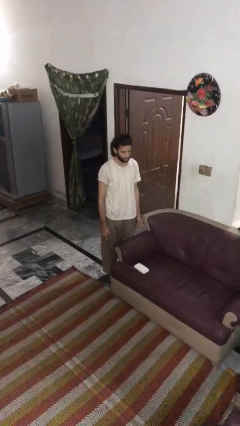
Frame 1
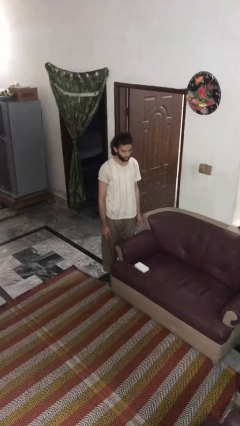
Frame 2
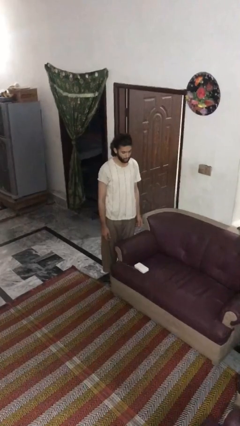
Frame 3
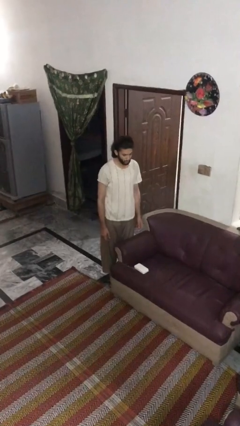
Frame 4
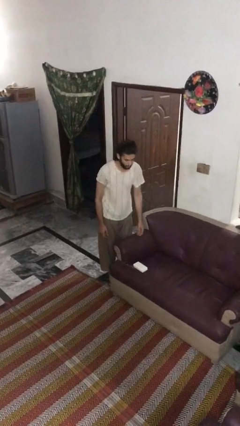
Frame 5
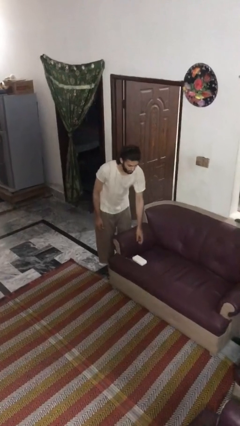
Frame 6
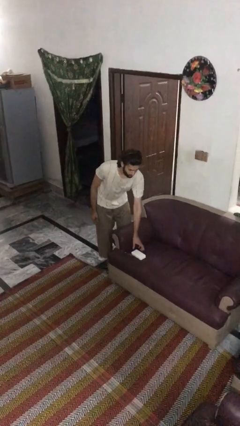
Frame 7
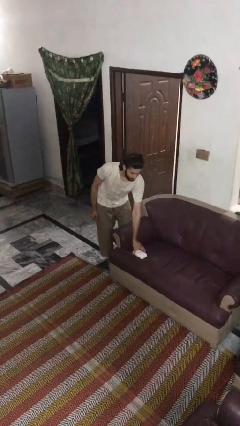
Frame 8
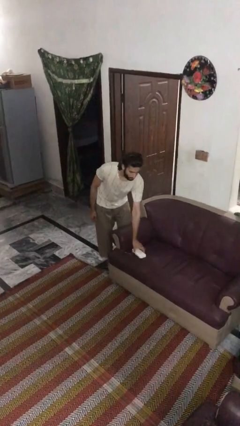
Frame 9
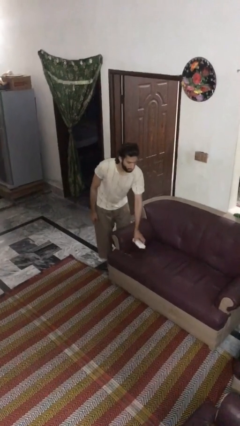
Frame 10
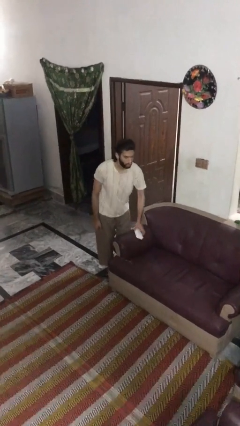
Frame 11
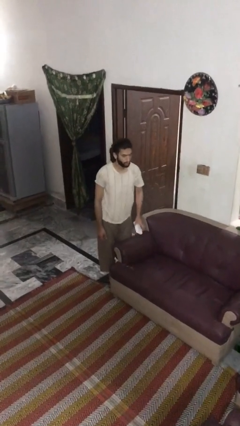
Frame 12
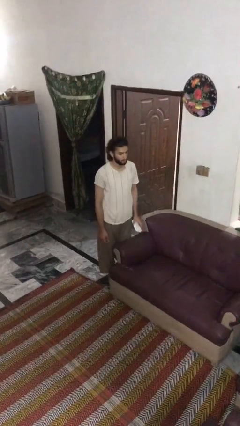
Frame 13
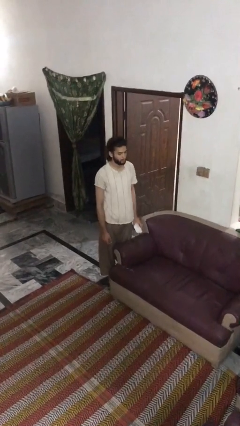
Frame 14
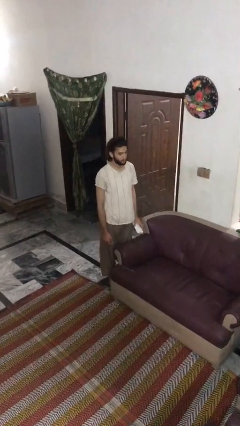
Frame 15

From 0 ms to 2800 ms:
person picks up object from couch

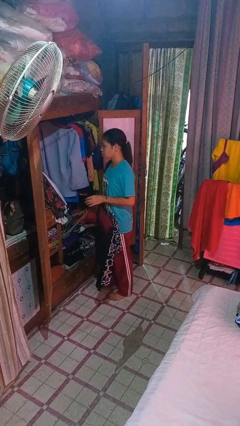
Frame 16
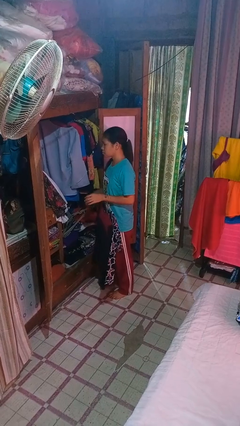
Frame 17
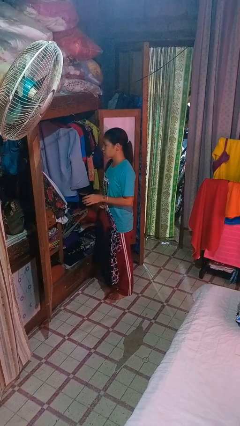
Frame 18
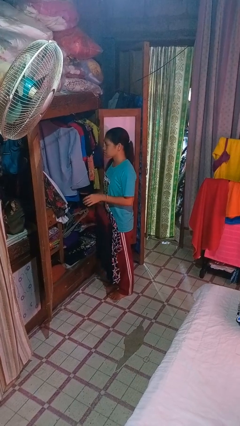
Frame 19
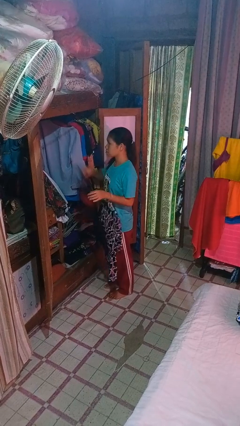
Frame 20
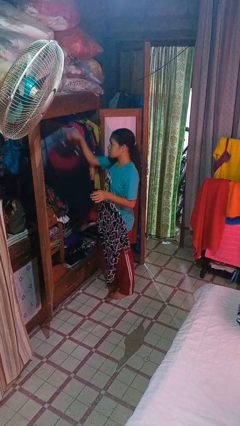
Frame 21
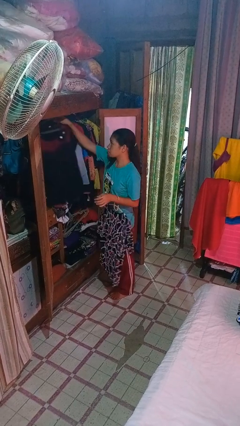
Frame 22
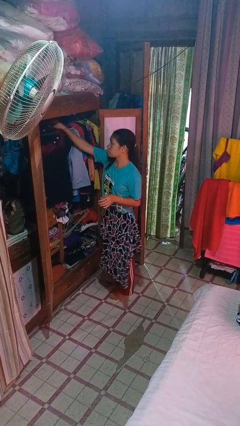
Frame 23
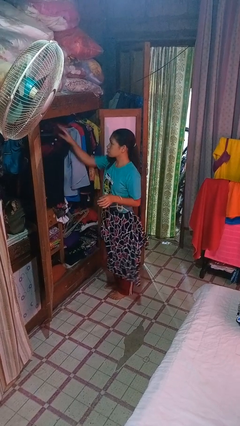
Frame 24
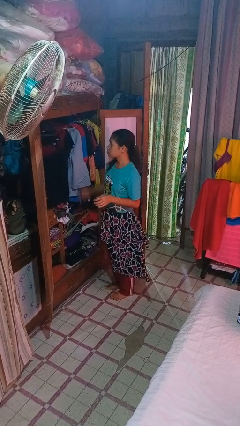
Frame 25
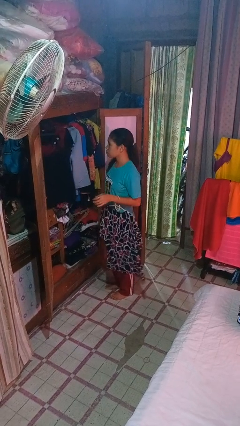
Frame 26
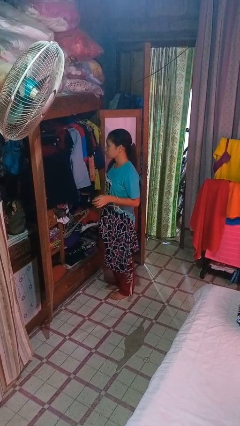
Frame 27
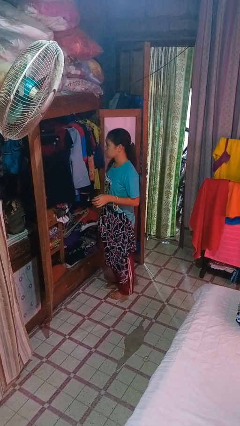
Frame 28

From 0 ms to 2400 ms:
person puts clothes into closet

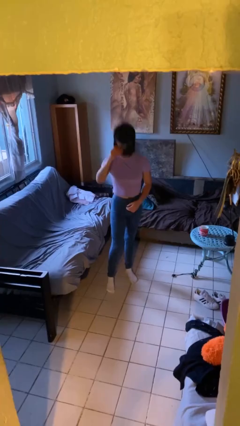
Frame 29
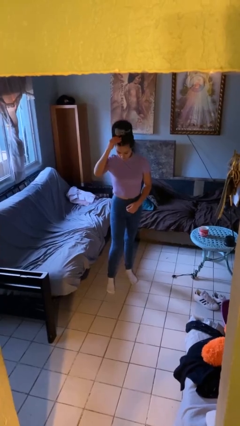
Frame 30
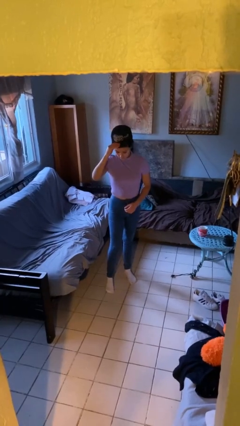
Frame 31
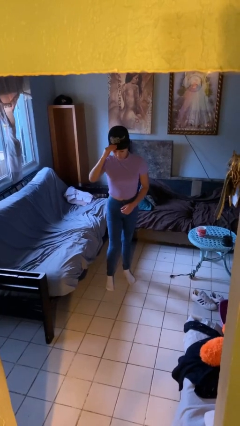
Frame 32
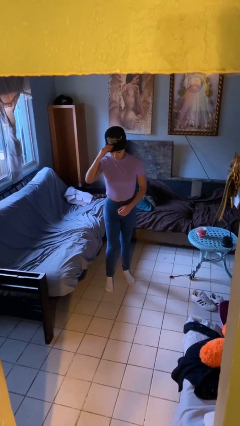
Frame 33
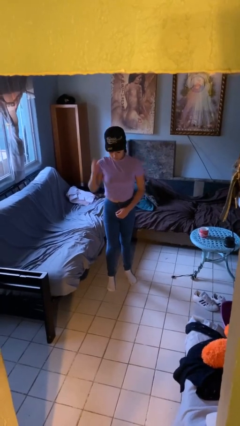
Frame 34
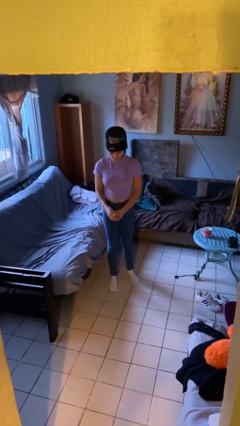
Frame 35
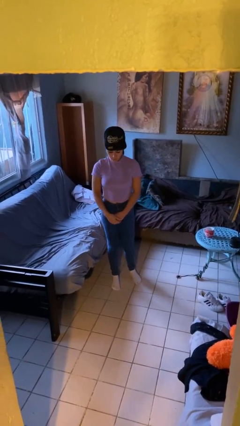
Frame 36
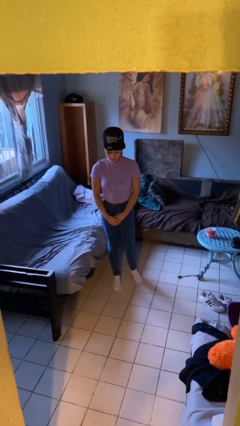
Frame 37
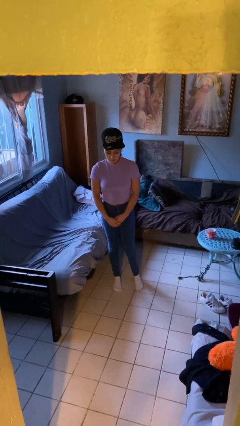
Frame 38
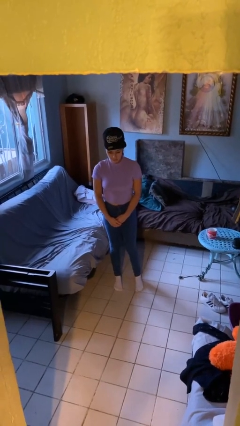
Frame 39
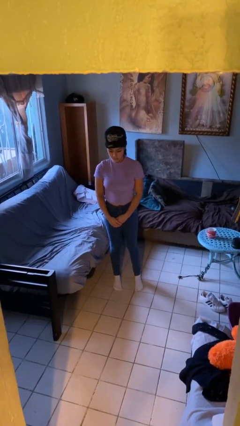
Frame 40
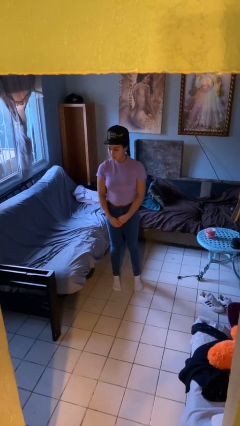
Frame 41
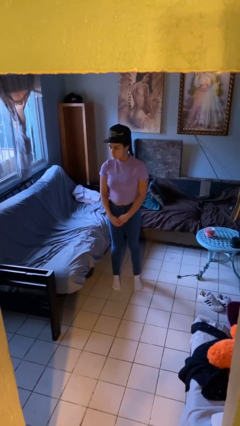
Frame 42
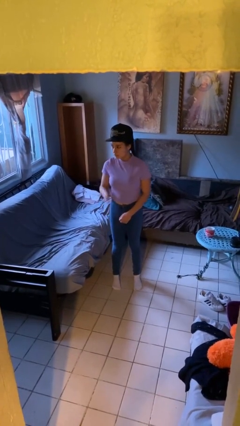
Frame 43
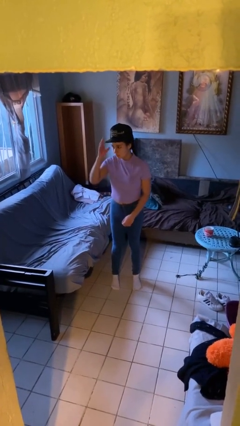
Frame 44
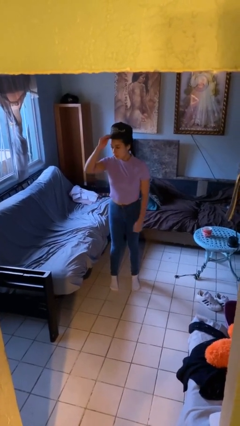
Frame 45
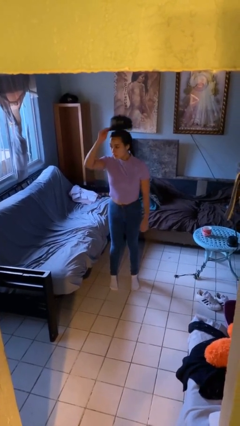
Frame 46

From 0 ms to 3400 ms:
person puts on hat

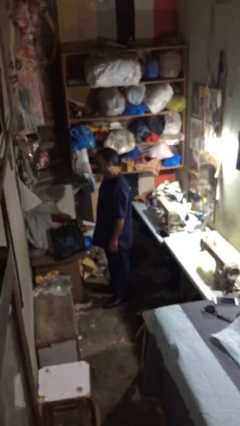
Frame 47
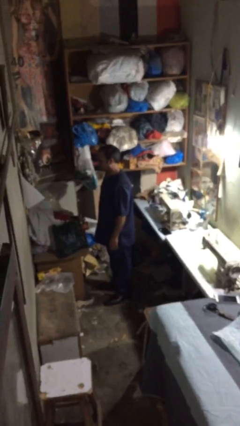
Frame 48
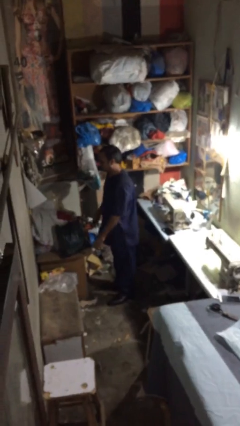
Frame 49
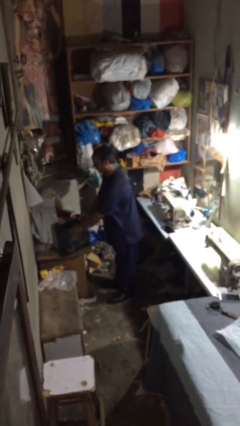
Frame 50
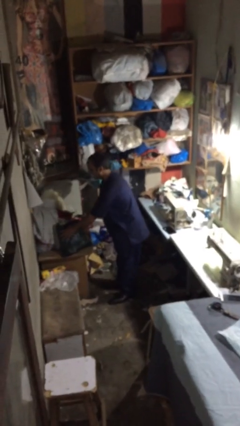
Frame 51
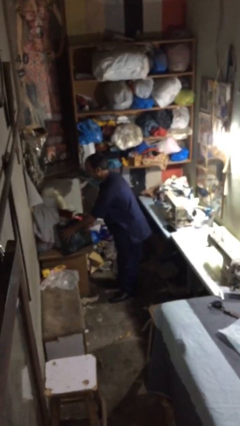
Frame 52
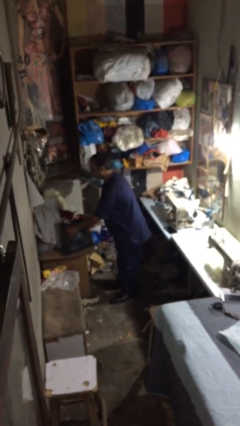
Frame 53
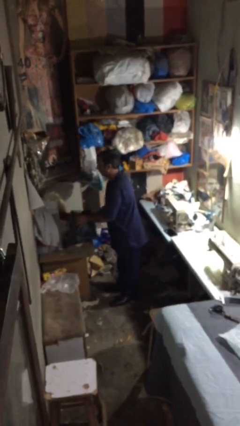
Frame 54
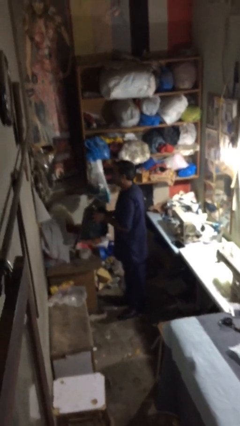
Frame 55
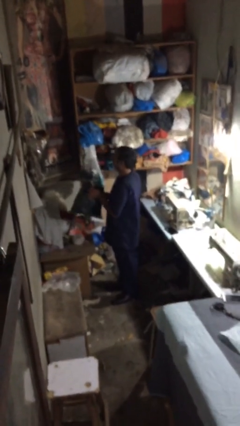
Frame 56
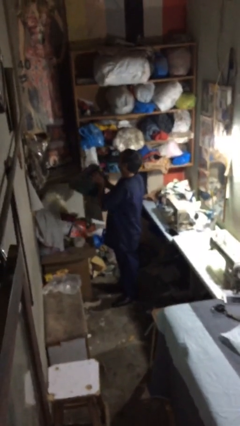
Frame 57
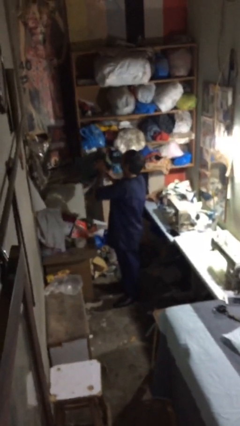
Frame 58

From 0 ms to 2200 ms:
person picks up object from table

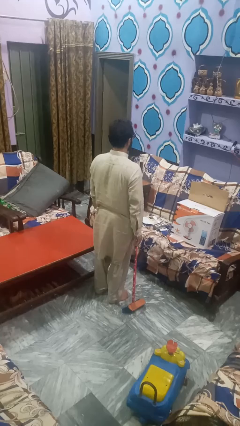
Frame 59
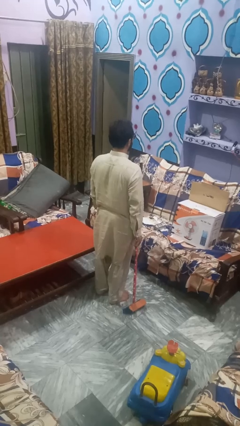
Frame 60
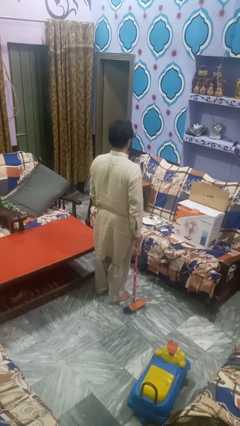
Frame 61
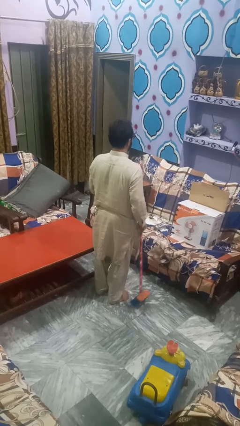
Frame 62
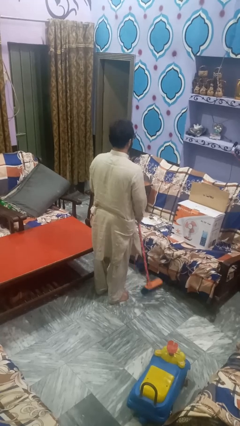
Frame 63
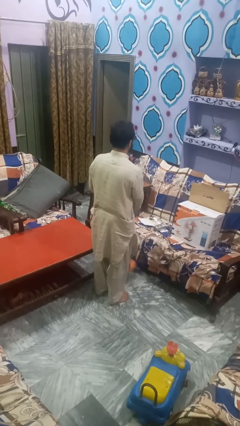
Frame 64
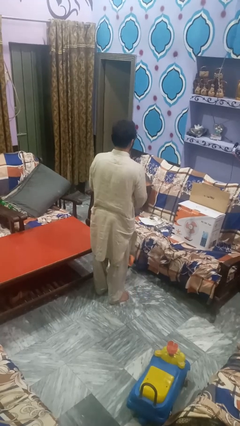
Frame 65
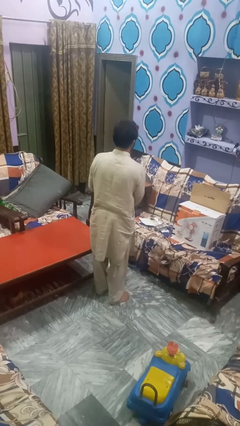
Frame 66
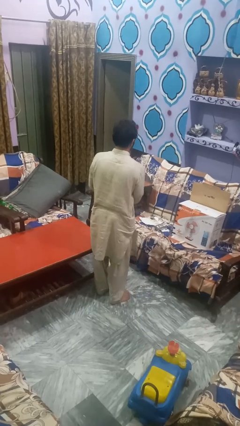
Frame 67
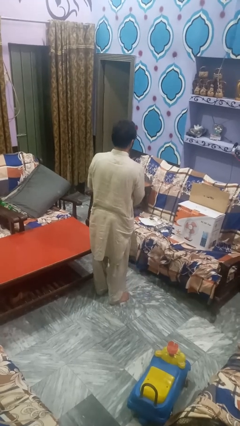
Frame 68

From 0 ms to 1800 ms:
person mops

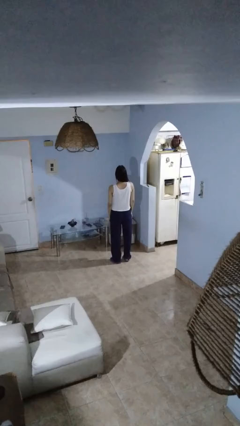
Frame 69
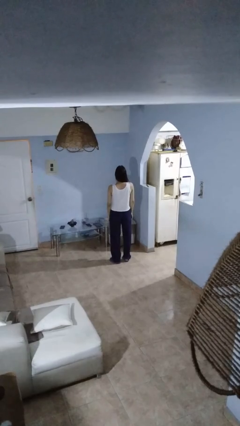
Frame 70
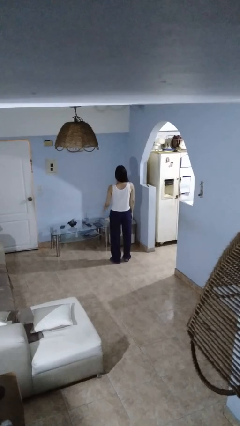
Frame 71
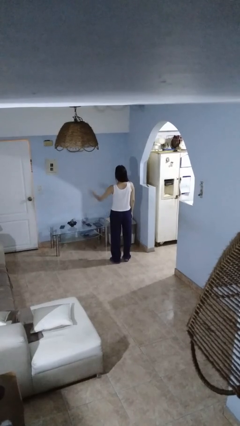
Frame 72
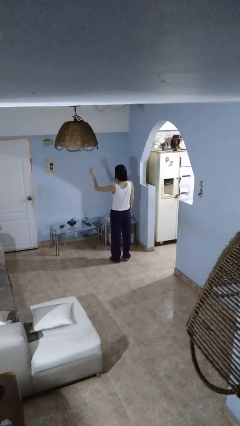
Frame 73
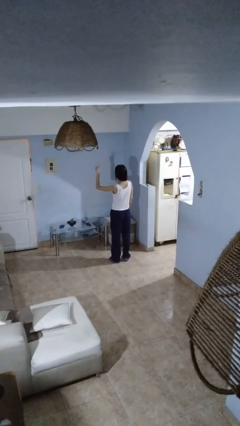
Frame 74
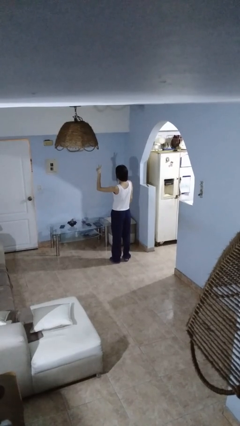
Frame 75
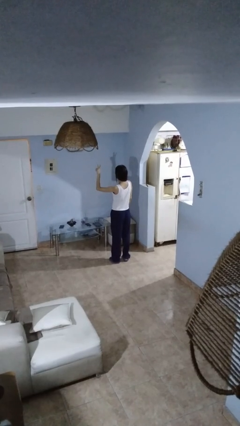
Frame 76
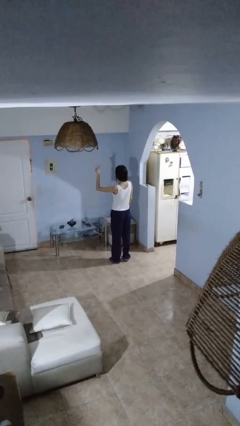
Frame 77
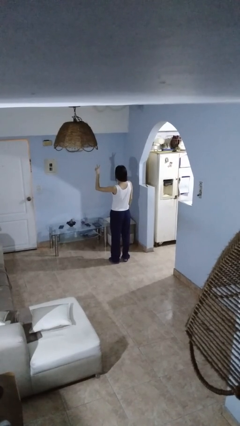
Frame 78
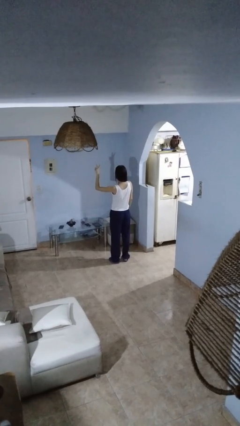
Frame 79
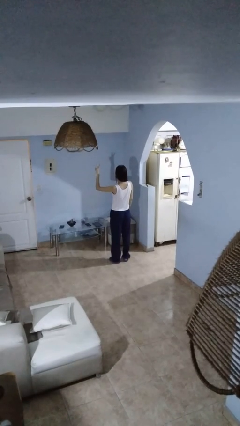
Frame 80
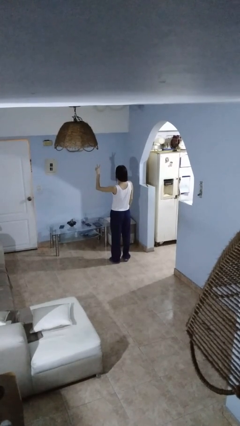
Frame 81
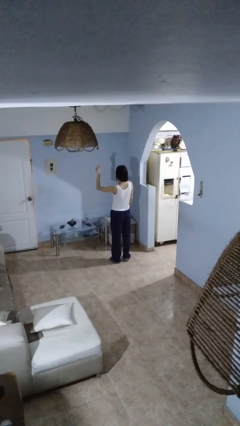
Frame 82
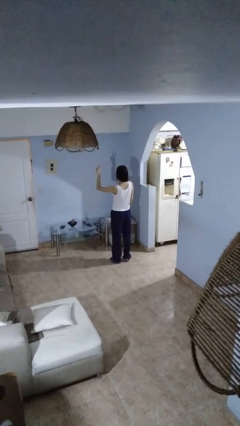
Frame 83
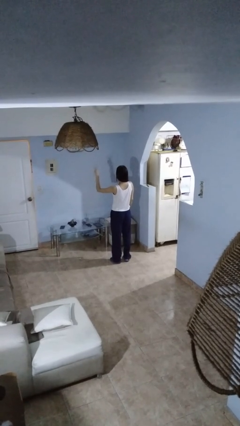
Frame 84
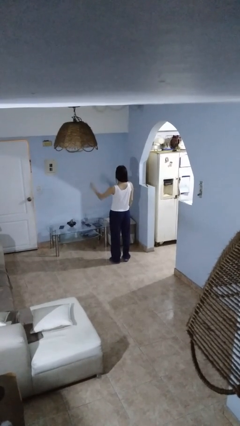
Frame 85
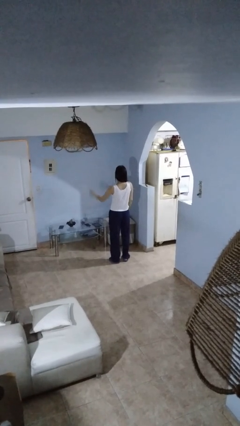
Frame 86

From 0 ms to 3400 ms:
person gestures peace

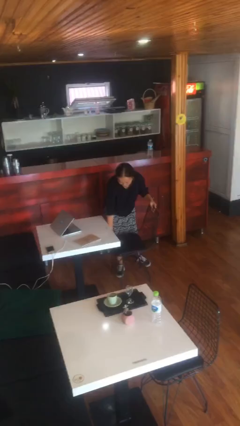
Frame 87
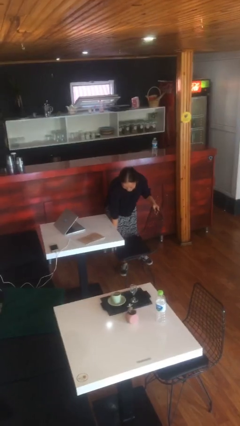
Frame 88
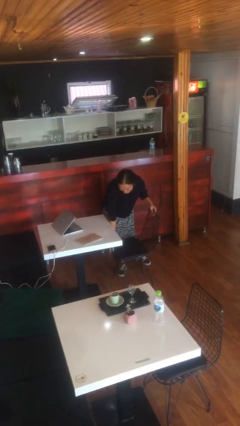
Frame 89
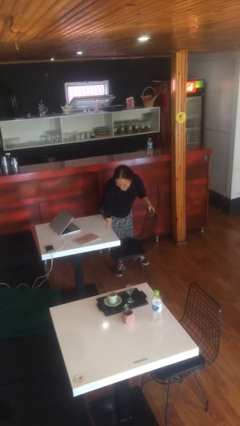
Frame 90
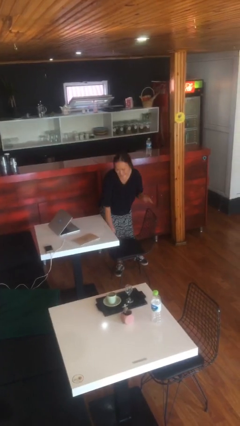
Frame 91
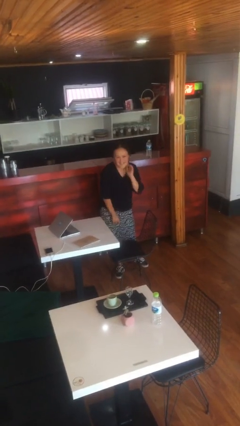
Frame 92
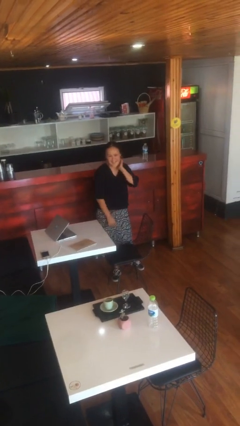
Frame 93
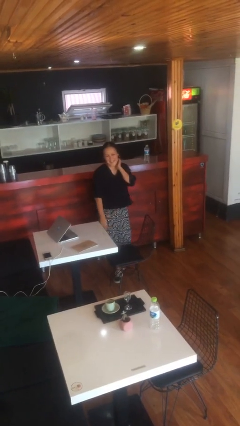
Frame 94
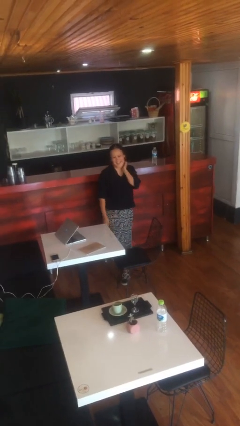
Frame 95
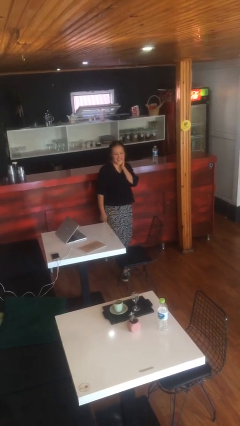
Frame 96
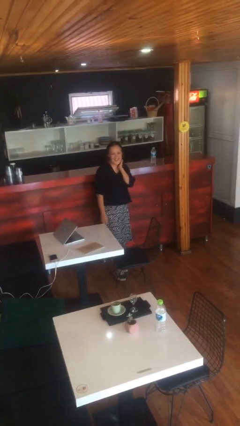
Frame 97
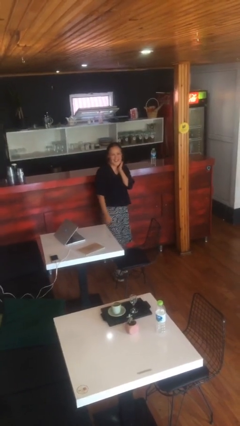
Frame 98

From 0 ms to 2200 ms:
person puts down object on floor
